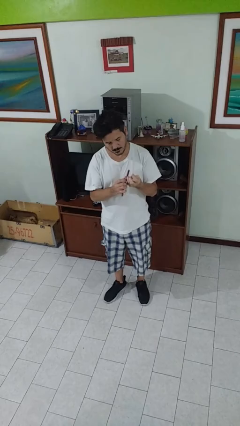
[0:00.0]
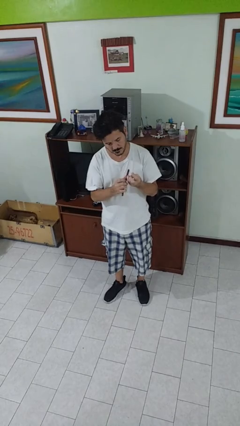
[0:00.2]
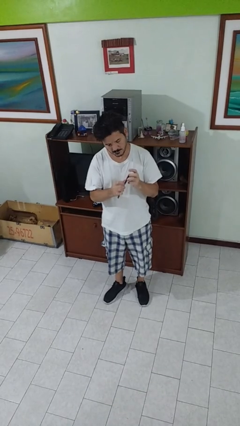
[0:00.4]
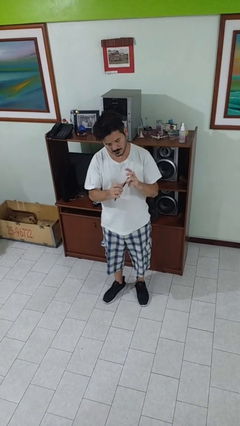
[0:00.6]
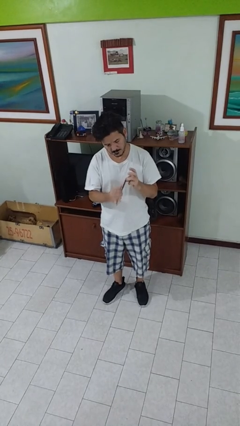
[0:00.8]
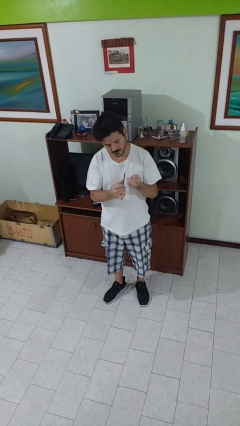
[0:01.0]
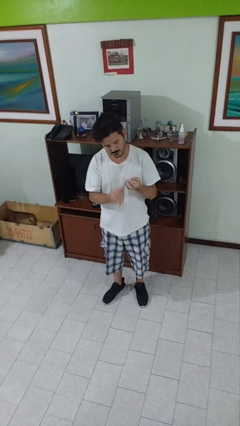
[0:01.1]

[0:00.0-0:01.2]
person files fingernails

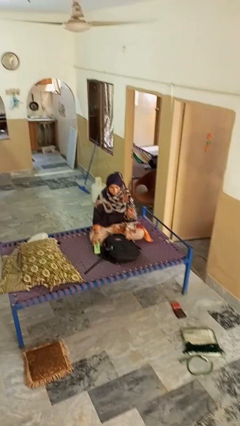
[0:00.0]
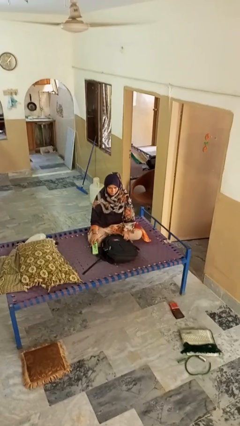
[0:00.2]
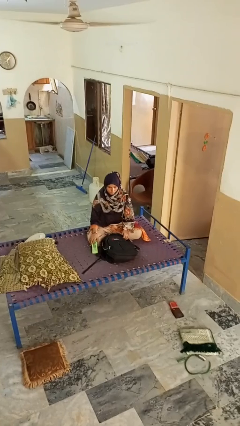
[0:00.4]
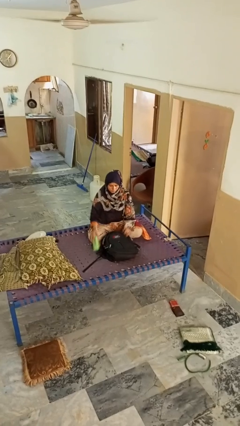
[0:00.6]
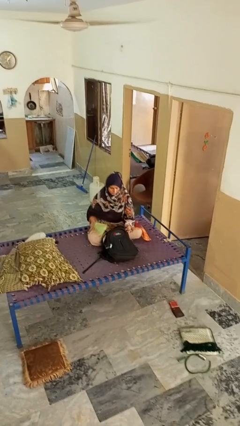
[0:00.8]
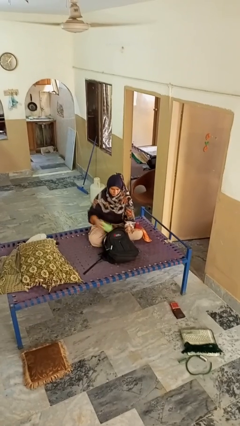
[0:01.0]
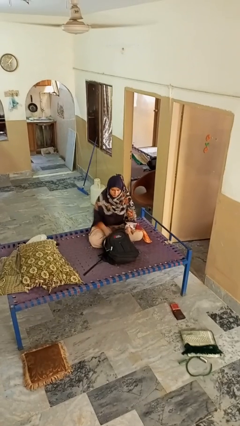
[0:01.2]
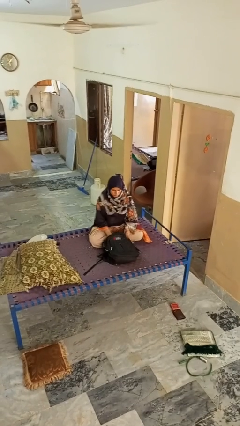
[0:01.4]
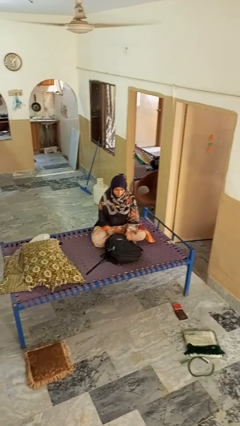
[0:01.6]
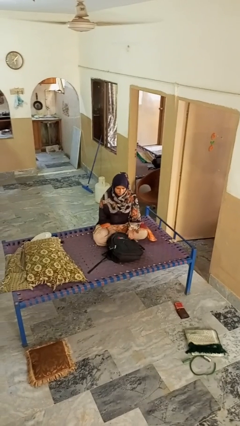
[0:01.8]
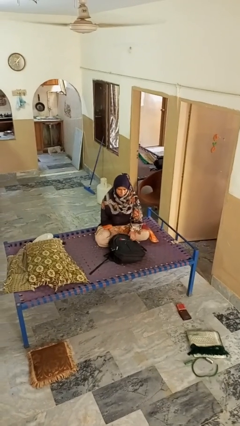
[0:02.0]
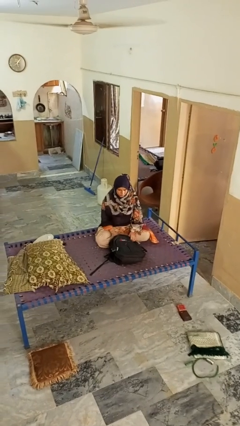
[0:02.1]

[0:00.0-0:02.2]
person puts object into bag

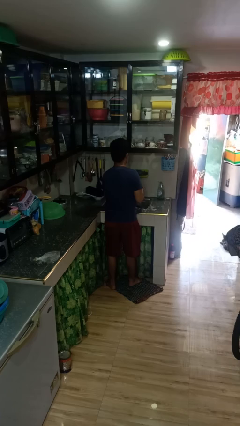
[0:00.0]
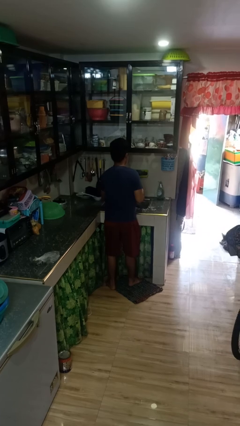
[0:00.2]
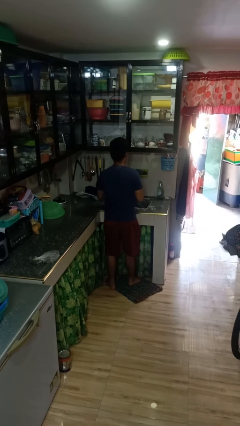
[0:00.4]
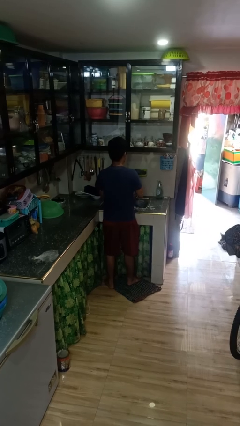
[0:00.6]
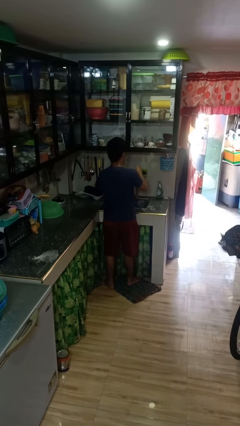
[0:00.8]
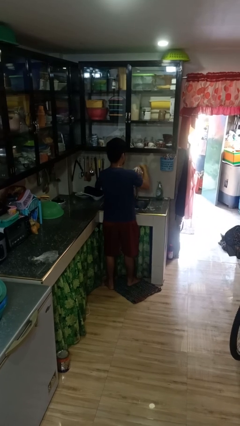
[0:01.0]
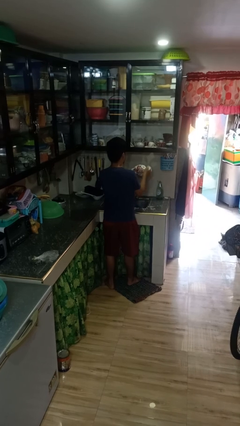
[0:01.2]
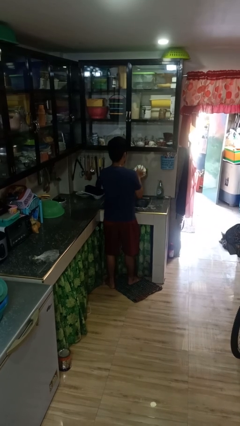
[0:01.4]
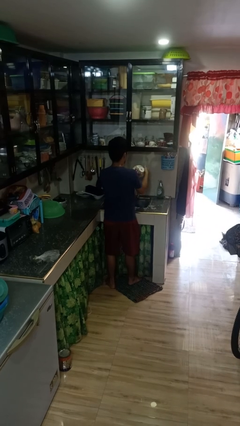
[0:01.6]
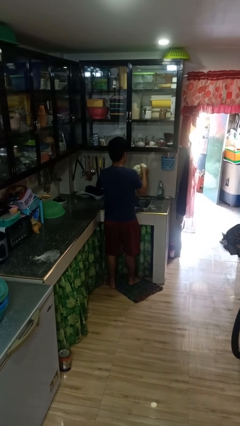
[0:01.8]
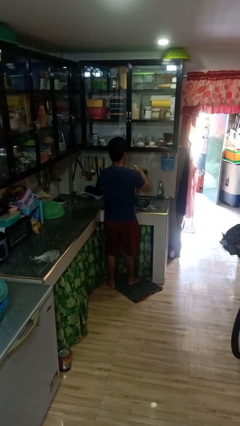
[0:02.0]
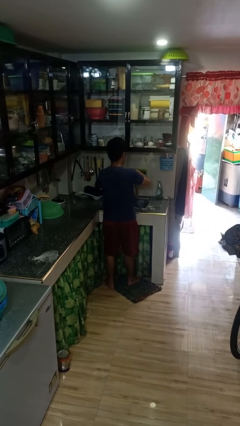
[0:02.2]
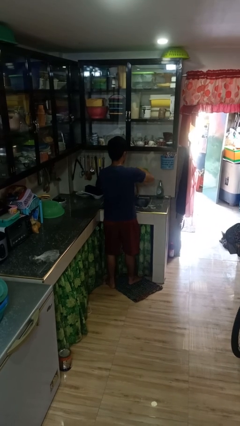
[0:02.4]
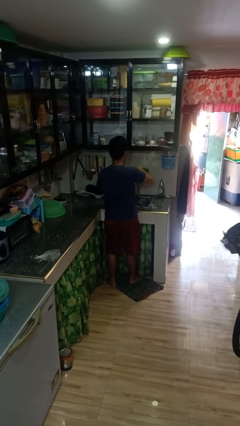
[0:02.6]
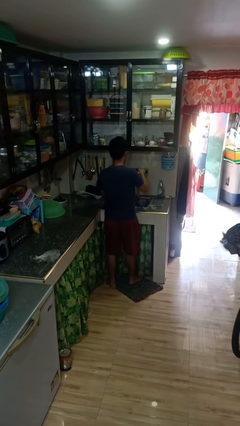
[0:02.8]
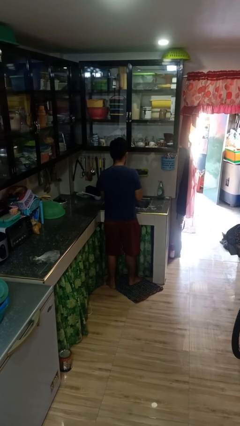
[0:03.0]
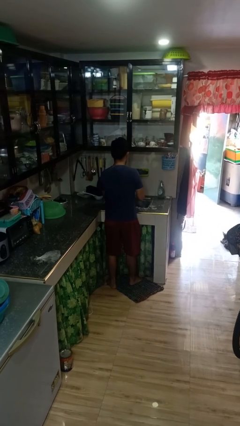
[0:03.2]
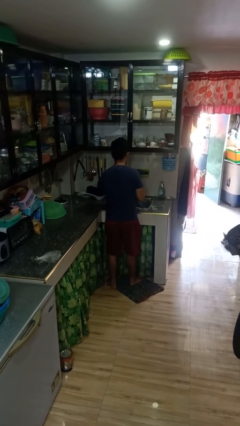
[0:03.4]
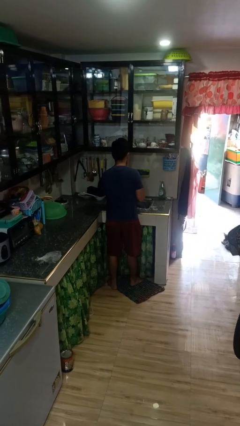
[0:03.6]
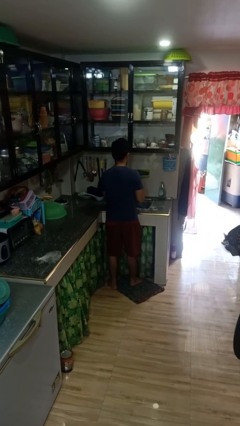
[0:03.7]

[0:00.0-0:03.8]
person washes dish

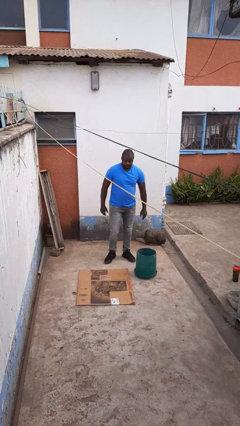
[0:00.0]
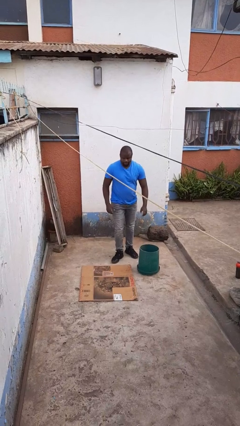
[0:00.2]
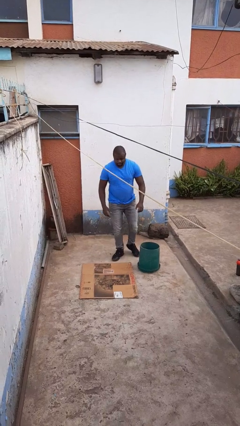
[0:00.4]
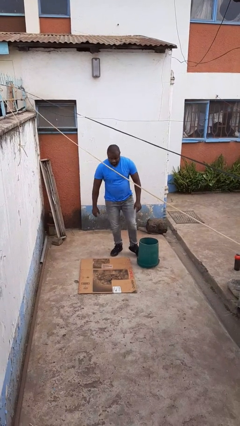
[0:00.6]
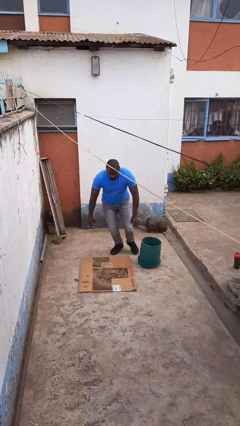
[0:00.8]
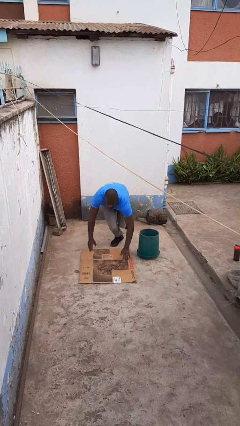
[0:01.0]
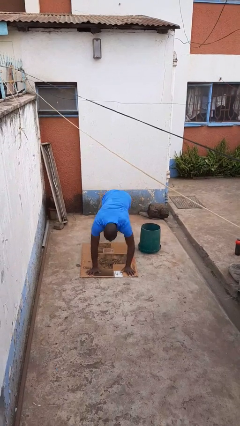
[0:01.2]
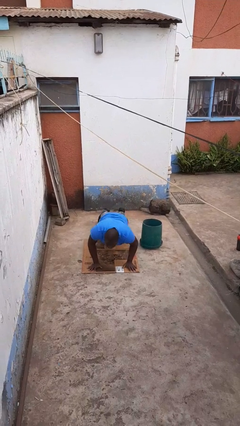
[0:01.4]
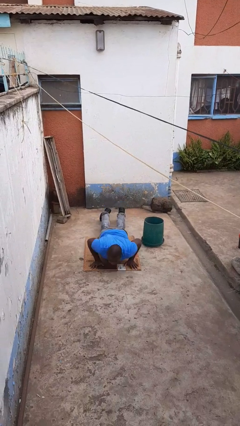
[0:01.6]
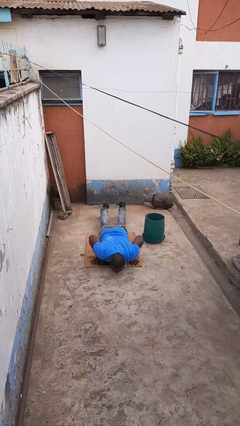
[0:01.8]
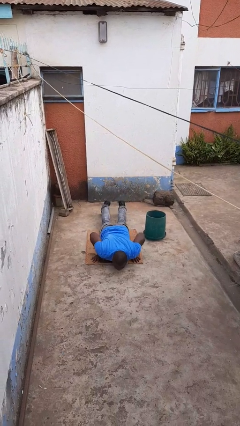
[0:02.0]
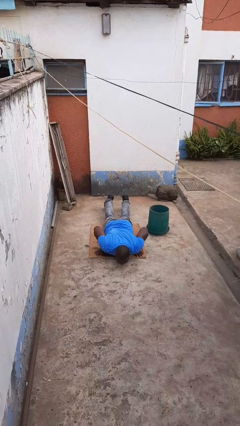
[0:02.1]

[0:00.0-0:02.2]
person trips on object on floor

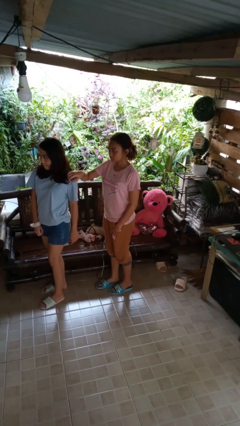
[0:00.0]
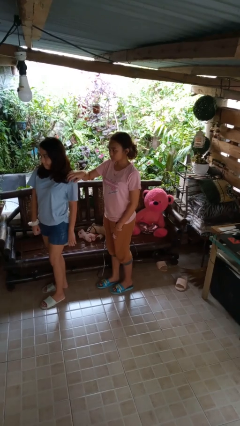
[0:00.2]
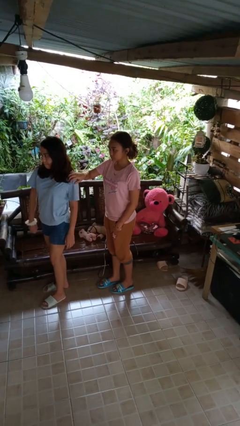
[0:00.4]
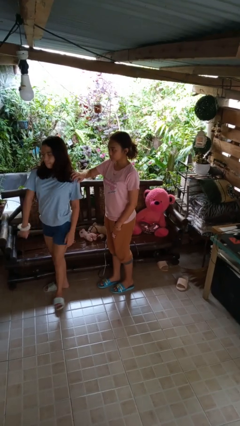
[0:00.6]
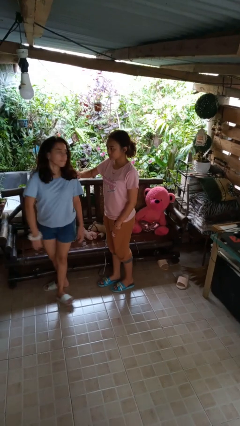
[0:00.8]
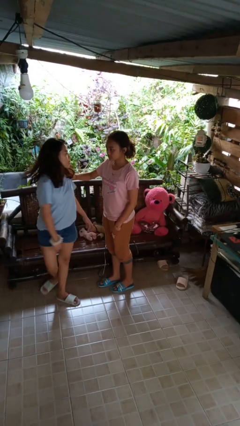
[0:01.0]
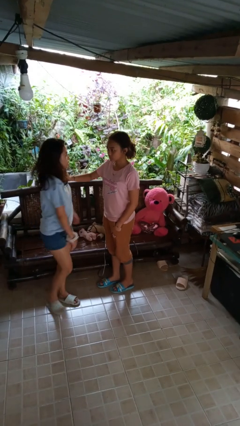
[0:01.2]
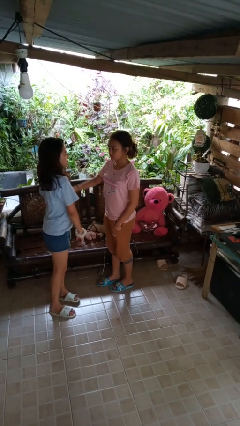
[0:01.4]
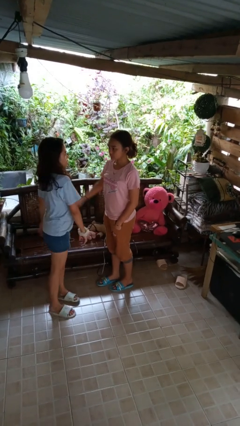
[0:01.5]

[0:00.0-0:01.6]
person spins person around

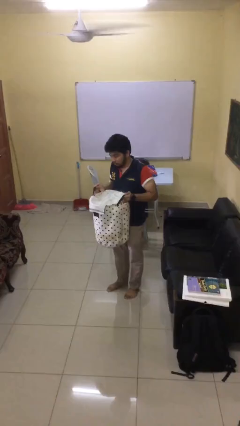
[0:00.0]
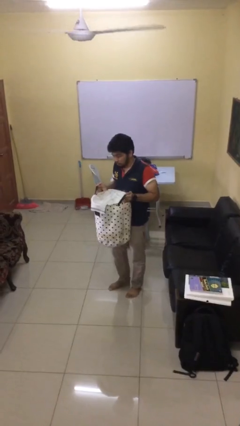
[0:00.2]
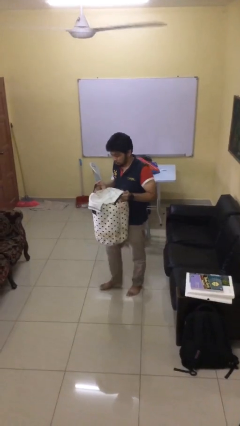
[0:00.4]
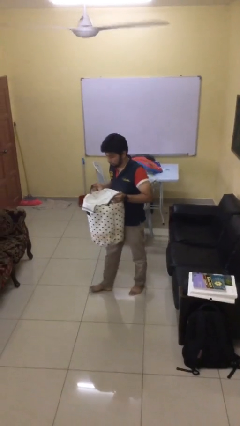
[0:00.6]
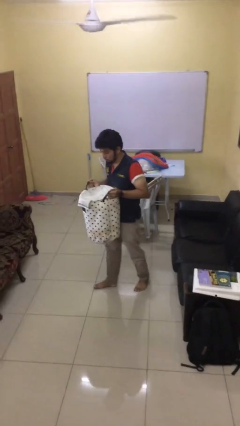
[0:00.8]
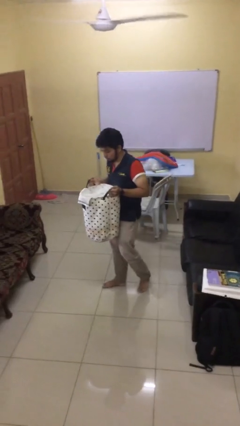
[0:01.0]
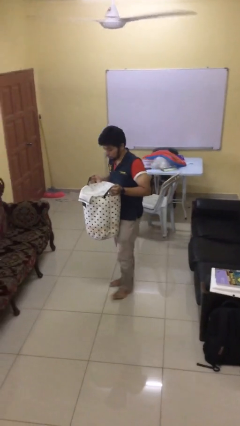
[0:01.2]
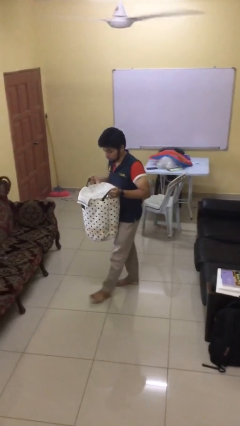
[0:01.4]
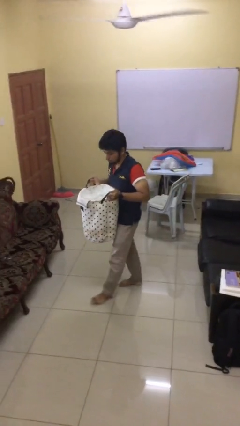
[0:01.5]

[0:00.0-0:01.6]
person carries laundry basket

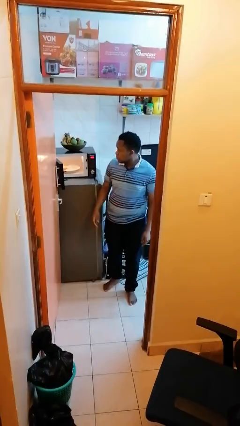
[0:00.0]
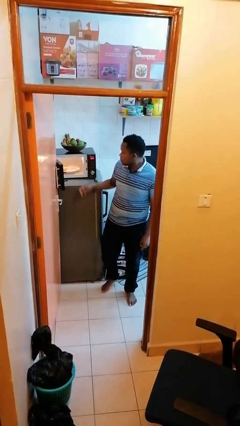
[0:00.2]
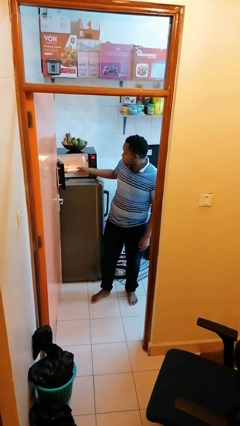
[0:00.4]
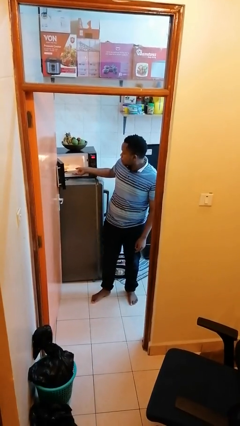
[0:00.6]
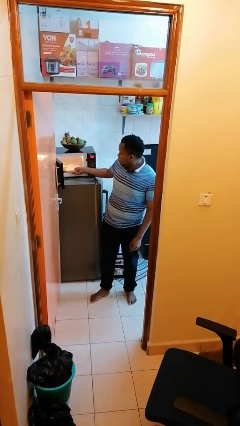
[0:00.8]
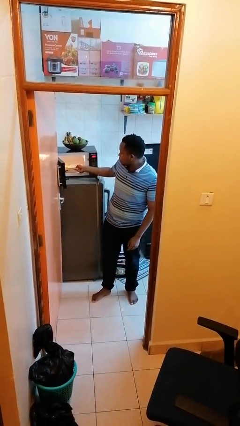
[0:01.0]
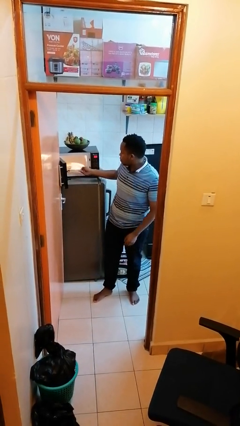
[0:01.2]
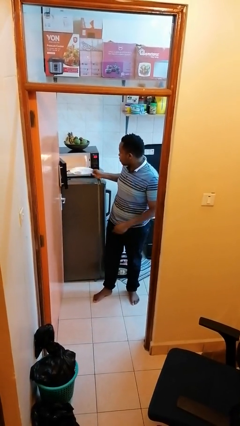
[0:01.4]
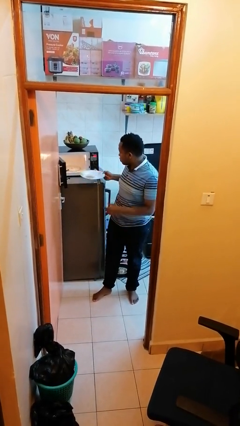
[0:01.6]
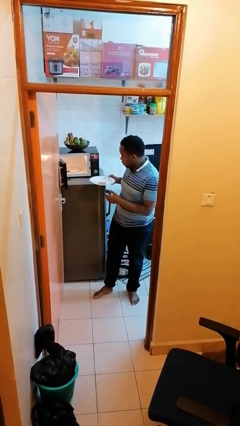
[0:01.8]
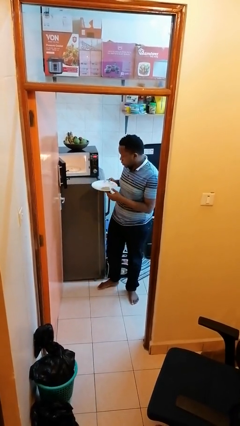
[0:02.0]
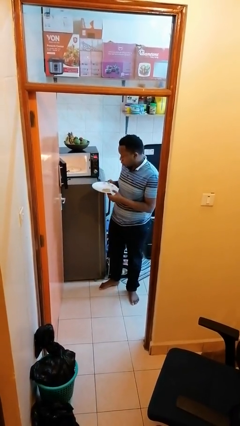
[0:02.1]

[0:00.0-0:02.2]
person takes object from microwave

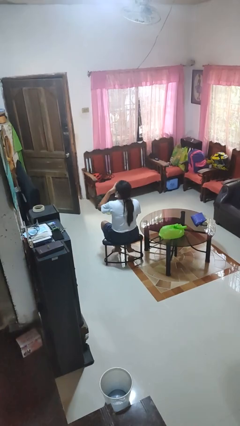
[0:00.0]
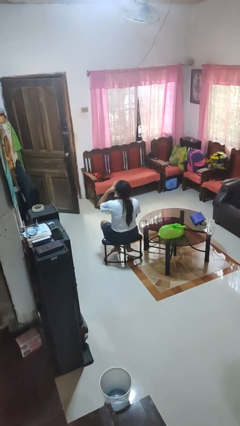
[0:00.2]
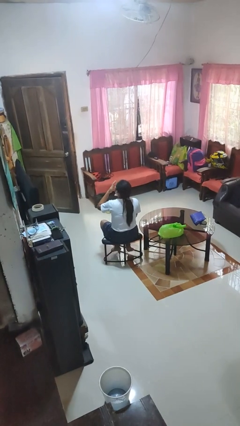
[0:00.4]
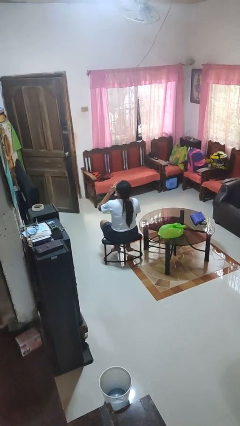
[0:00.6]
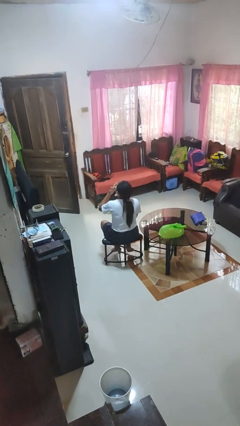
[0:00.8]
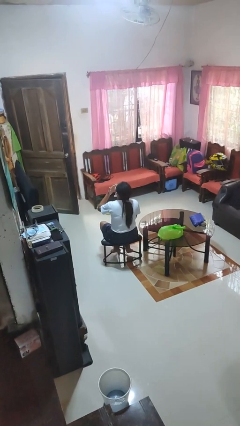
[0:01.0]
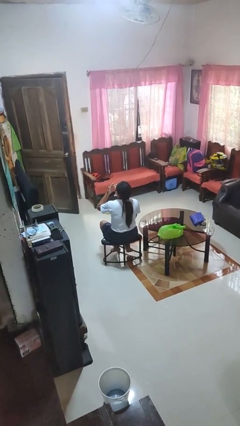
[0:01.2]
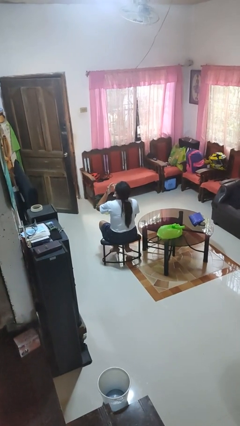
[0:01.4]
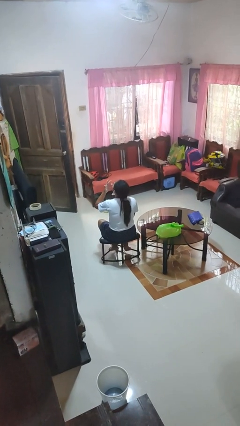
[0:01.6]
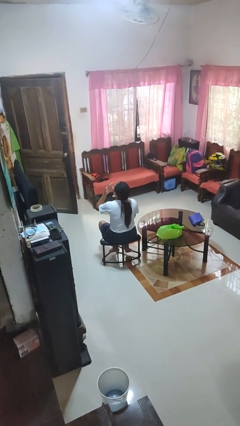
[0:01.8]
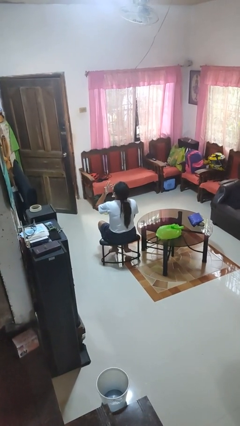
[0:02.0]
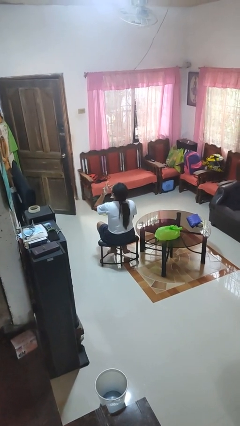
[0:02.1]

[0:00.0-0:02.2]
person licks fingers
